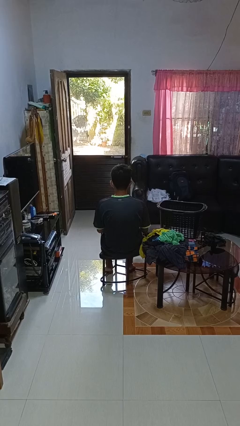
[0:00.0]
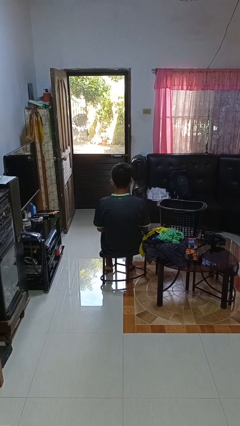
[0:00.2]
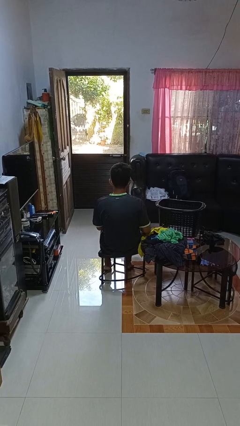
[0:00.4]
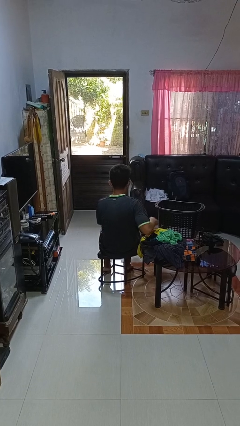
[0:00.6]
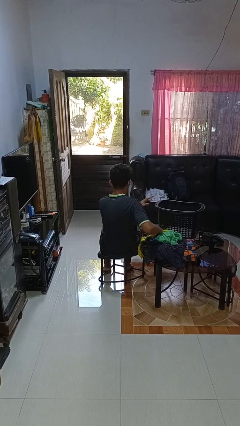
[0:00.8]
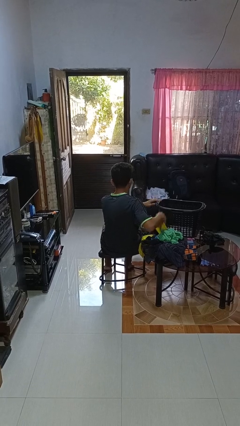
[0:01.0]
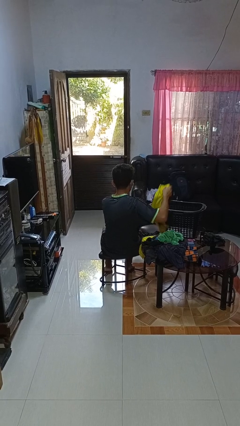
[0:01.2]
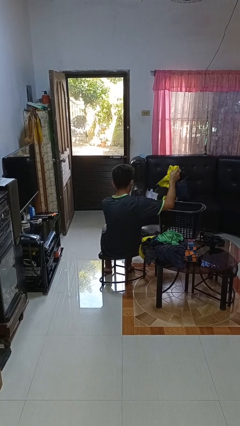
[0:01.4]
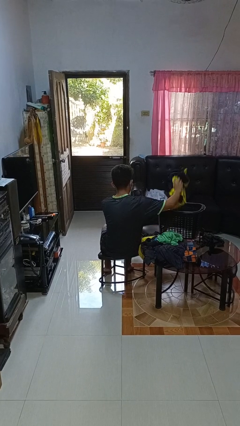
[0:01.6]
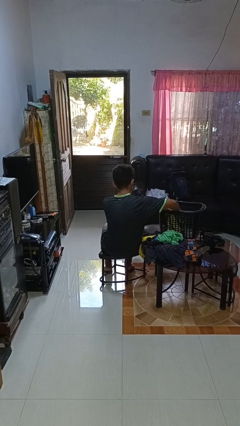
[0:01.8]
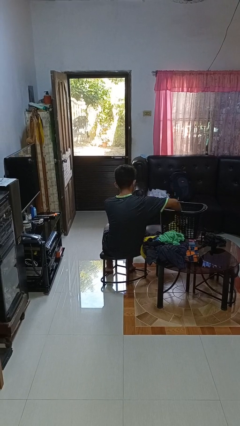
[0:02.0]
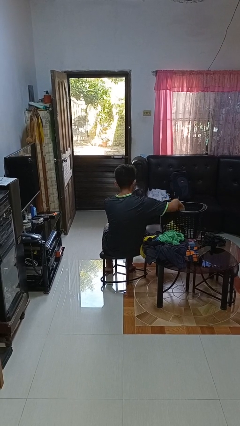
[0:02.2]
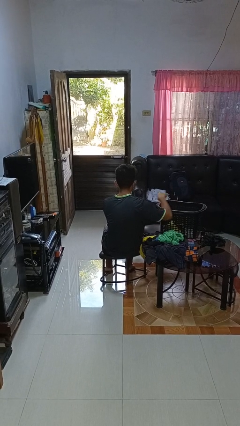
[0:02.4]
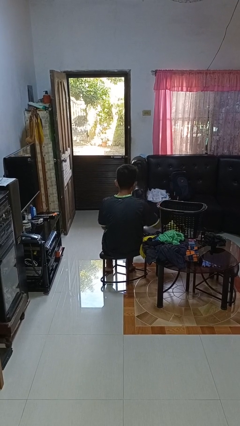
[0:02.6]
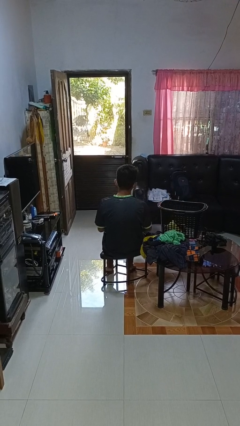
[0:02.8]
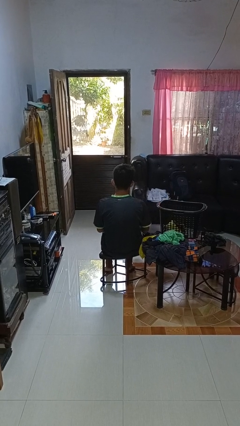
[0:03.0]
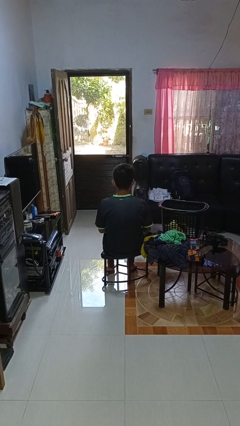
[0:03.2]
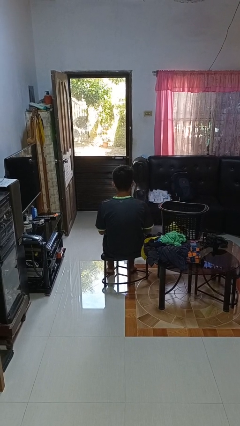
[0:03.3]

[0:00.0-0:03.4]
person puts object into basket

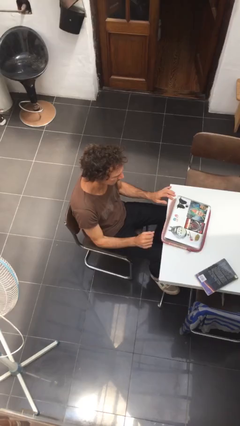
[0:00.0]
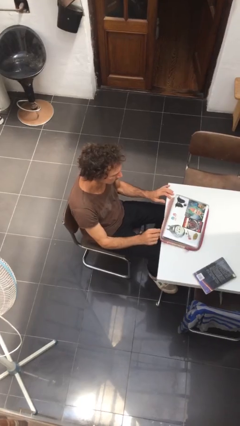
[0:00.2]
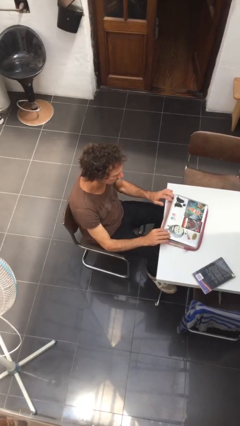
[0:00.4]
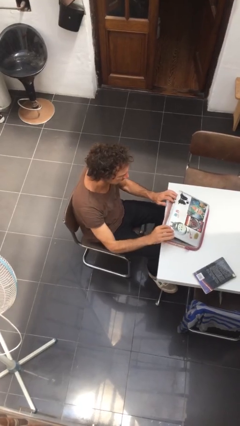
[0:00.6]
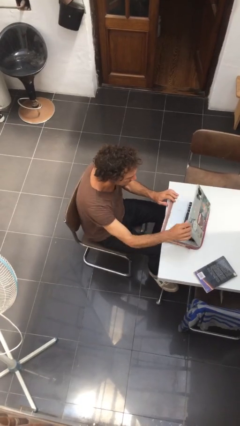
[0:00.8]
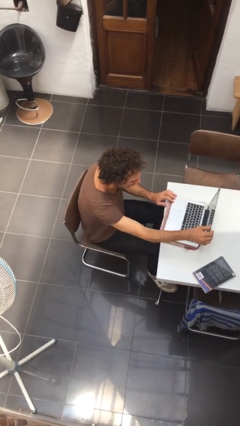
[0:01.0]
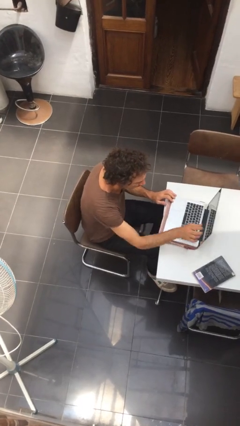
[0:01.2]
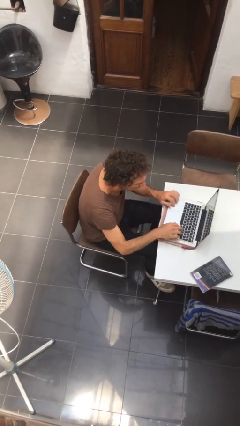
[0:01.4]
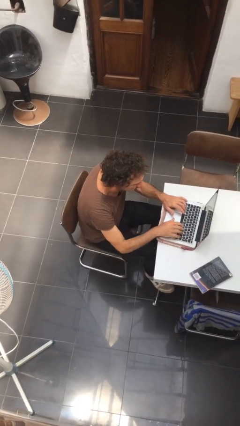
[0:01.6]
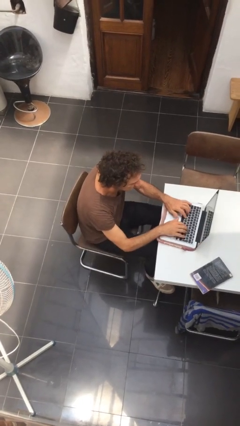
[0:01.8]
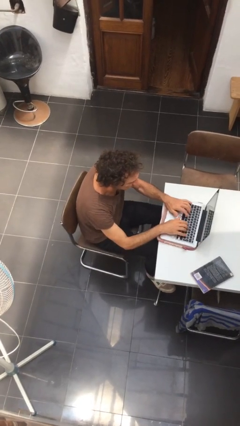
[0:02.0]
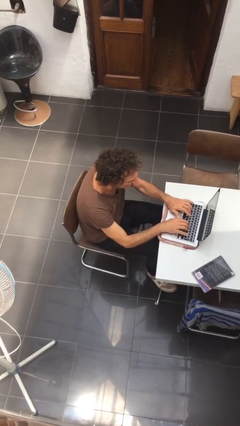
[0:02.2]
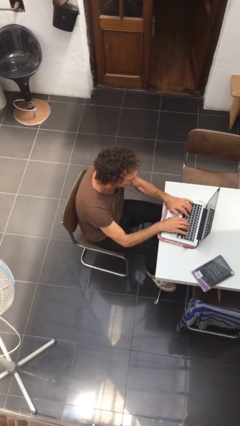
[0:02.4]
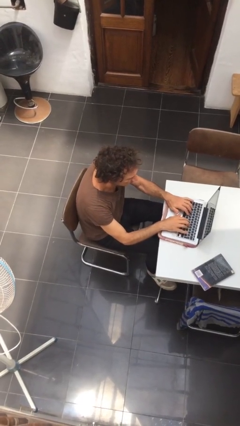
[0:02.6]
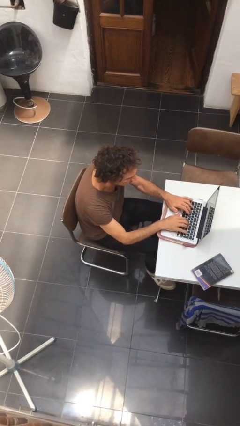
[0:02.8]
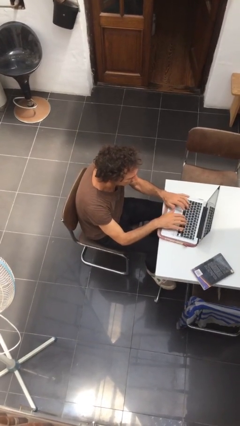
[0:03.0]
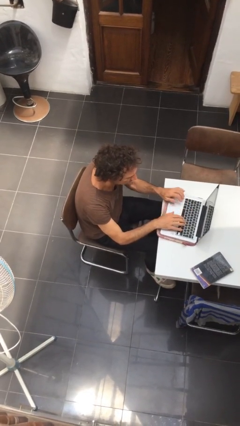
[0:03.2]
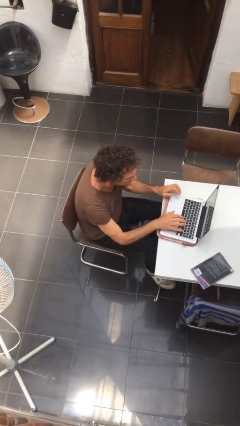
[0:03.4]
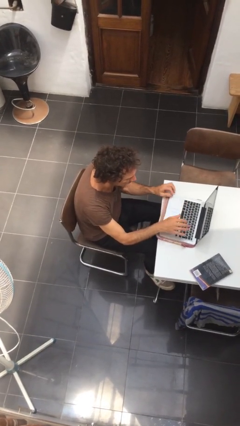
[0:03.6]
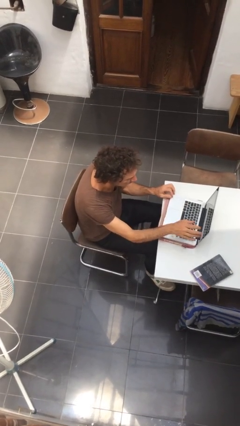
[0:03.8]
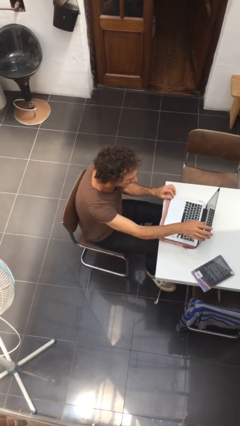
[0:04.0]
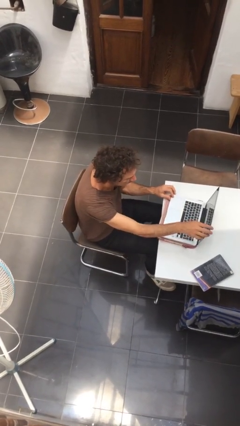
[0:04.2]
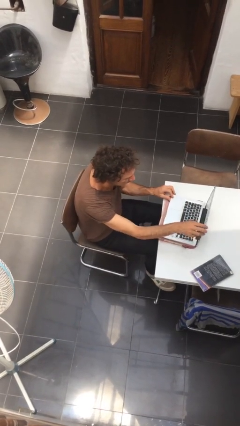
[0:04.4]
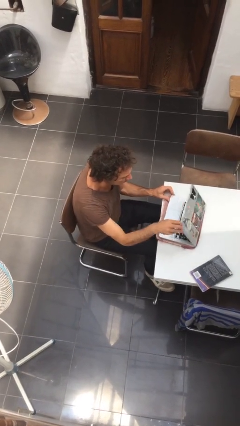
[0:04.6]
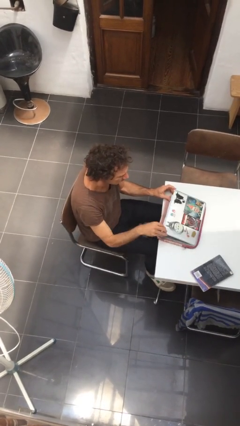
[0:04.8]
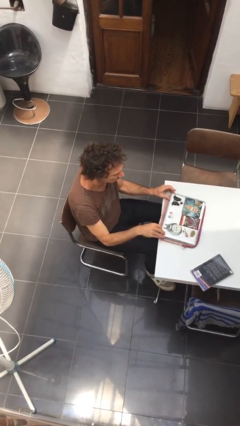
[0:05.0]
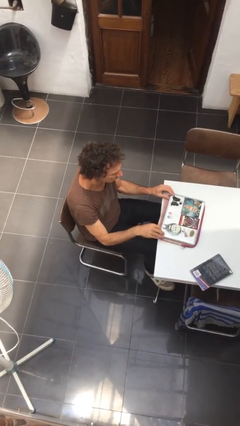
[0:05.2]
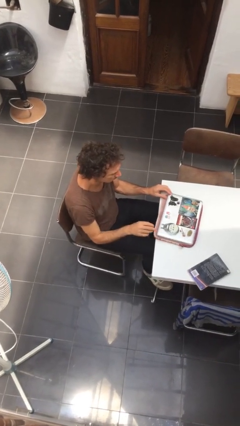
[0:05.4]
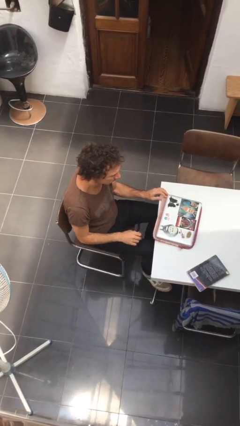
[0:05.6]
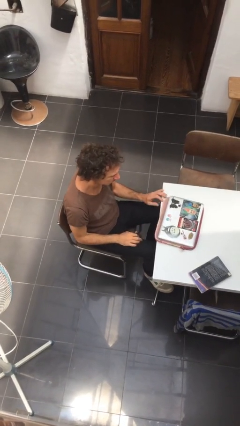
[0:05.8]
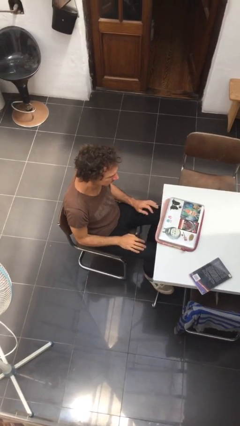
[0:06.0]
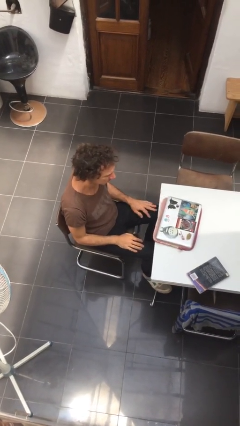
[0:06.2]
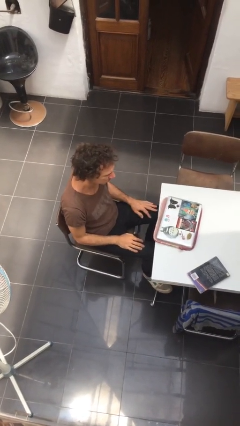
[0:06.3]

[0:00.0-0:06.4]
person interacts with laptop

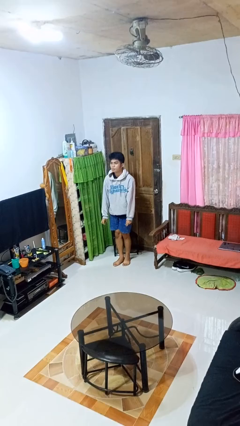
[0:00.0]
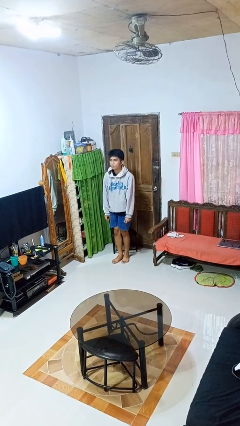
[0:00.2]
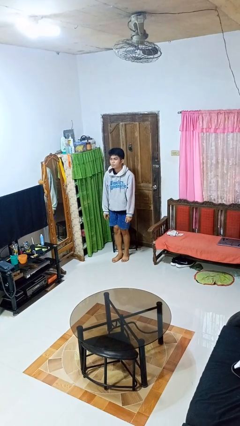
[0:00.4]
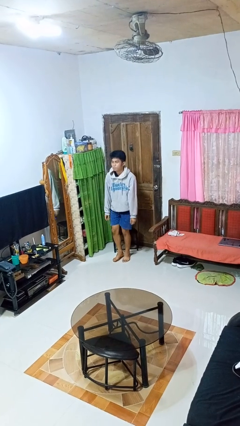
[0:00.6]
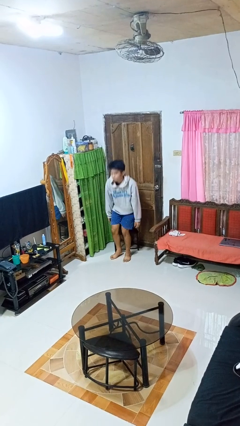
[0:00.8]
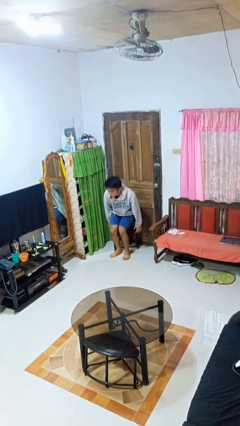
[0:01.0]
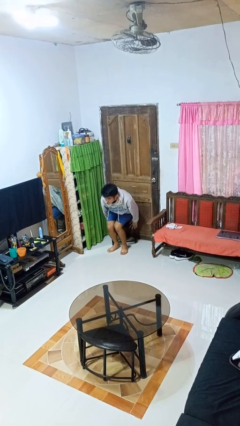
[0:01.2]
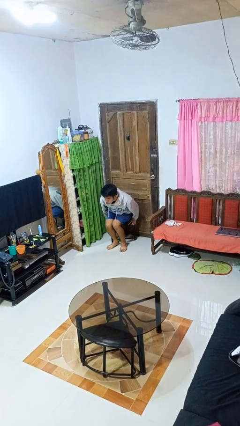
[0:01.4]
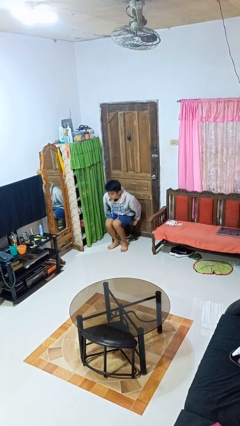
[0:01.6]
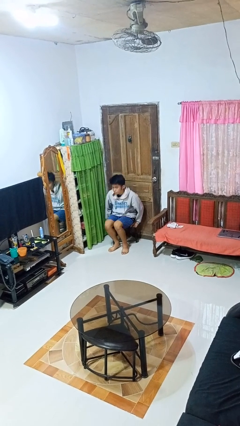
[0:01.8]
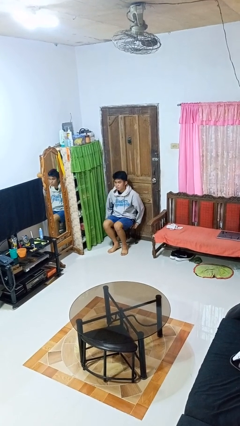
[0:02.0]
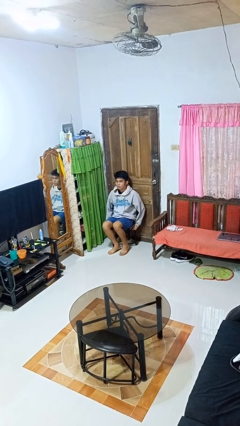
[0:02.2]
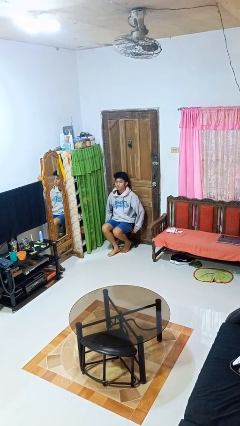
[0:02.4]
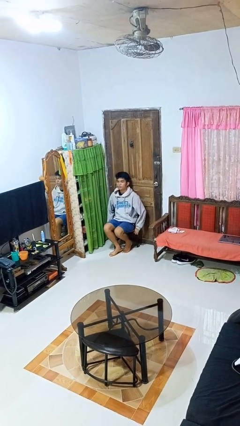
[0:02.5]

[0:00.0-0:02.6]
person sits down

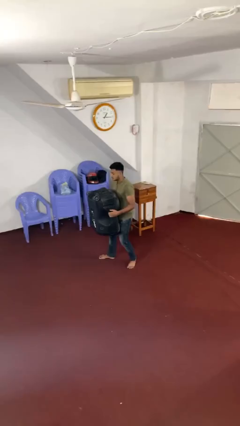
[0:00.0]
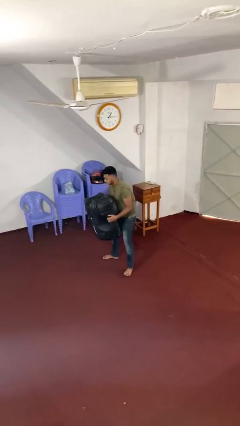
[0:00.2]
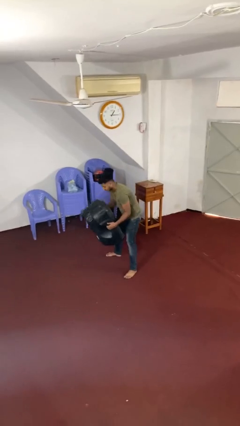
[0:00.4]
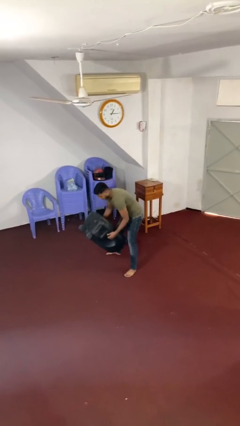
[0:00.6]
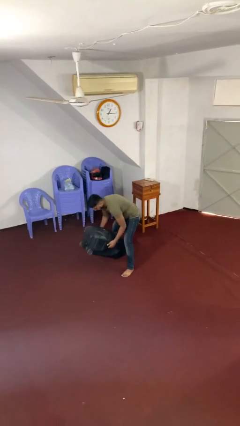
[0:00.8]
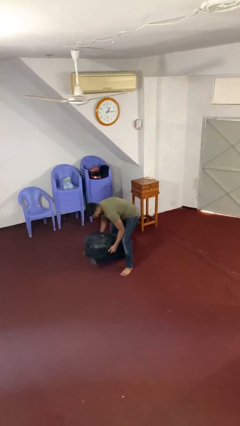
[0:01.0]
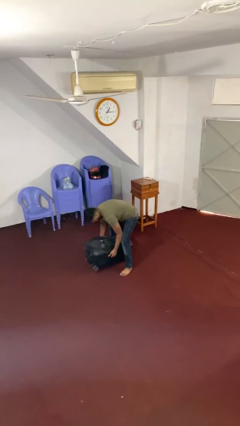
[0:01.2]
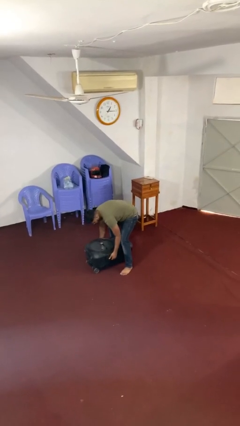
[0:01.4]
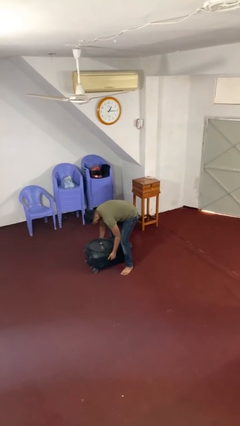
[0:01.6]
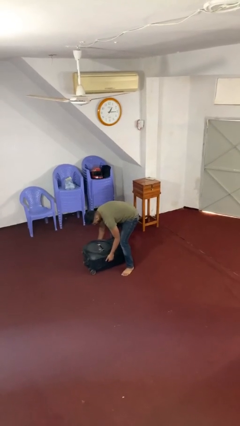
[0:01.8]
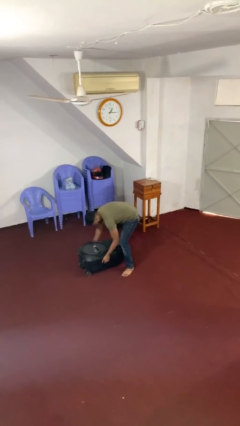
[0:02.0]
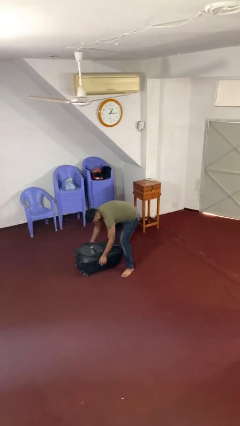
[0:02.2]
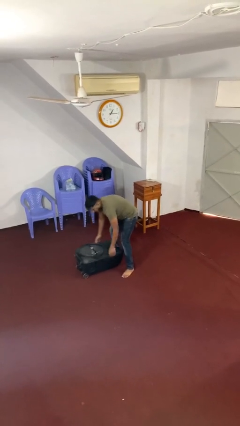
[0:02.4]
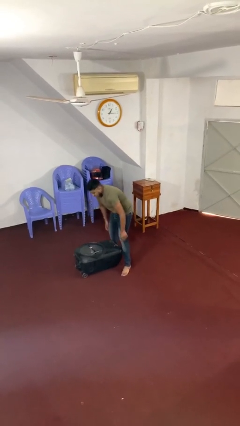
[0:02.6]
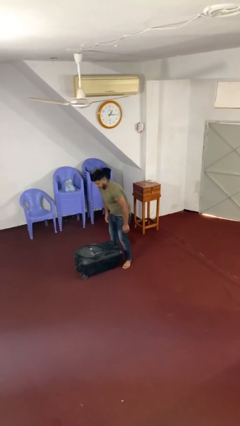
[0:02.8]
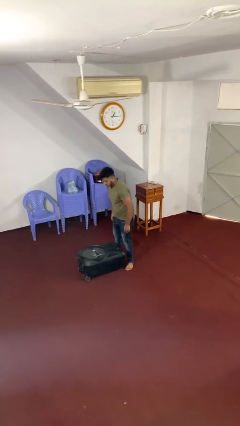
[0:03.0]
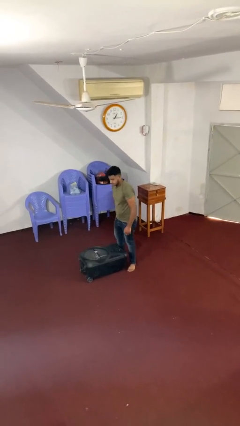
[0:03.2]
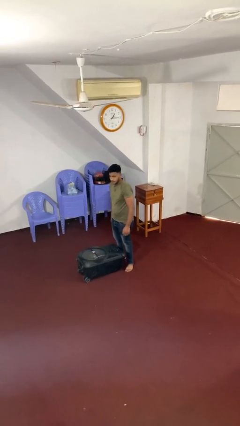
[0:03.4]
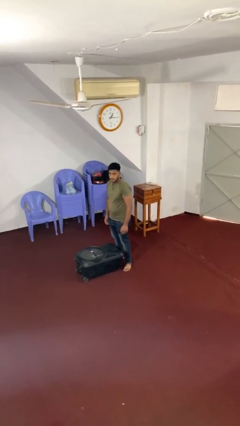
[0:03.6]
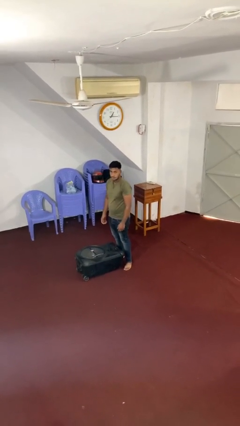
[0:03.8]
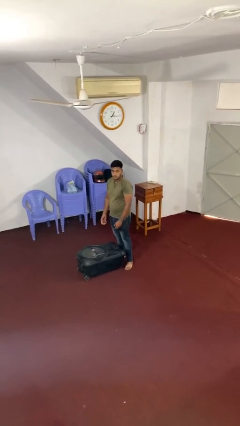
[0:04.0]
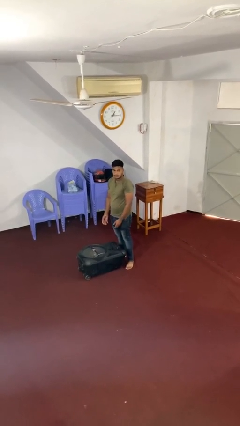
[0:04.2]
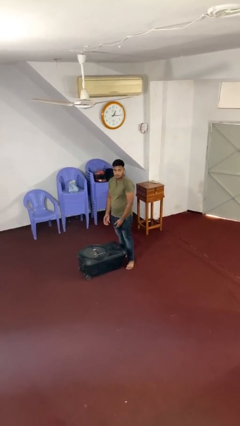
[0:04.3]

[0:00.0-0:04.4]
person puts down object on floor

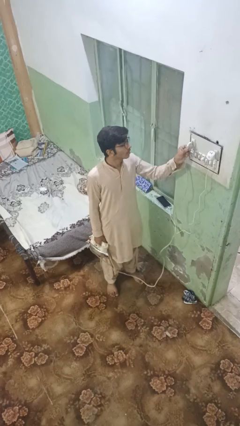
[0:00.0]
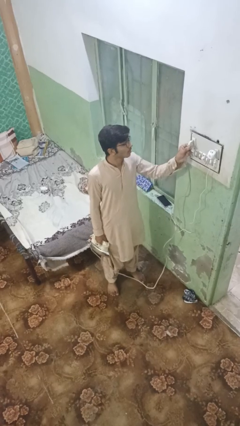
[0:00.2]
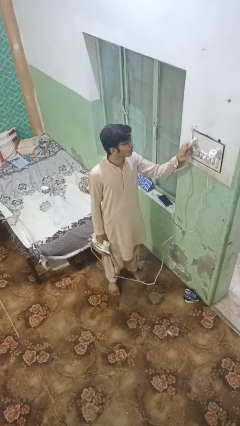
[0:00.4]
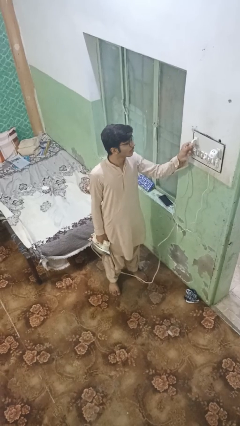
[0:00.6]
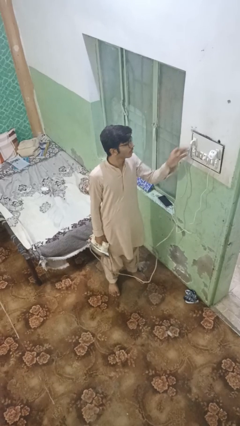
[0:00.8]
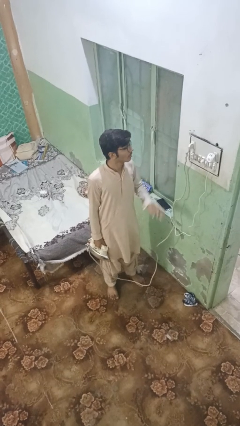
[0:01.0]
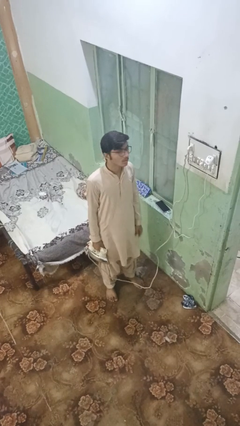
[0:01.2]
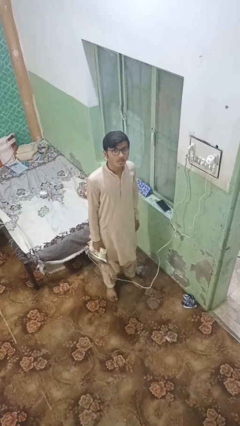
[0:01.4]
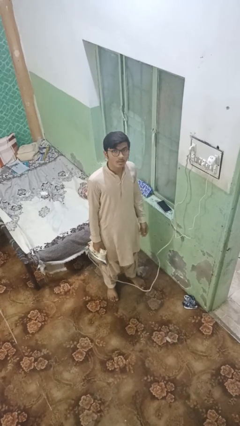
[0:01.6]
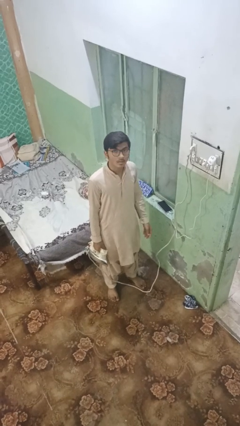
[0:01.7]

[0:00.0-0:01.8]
person plugs into electrical socket
